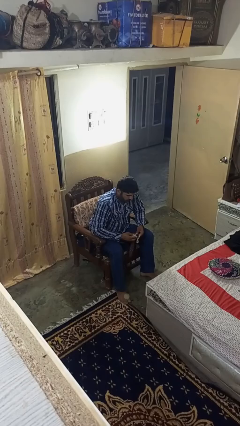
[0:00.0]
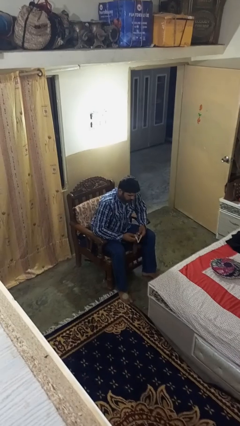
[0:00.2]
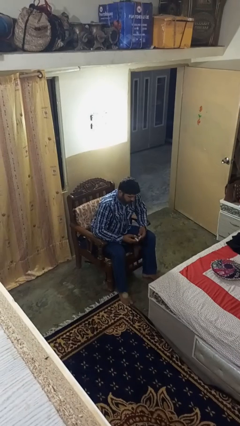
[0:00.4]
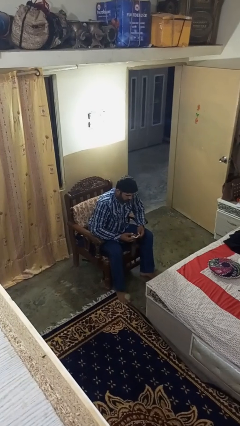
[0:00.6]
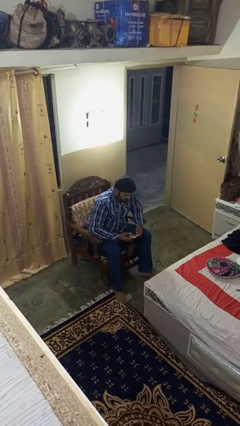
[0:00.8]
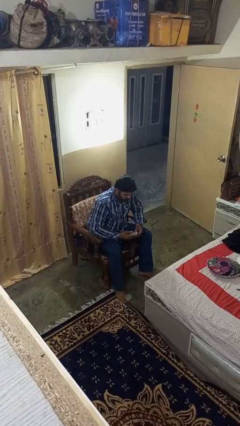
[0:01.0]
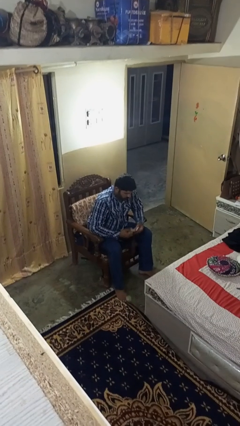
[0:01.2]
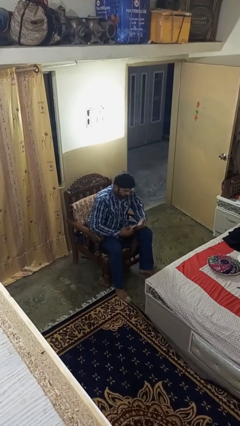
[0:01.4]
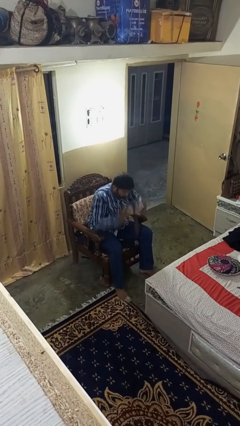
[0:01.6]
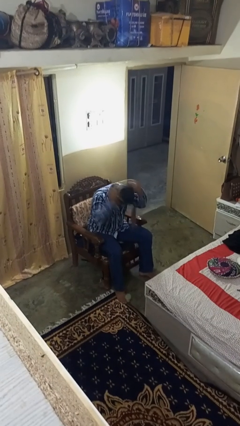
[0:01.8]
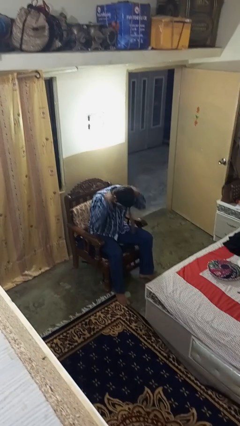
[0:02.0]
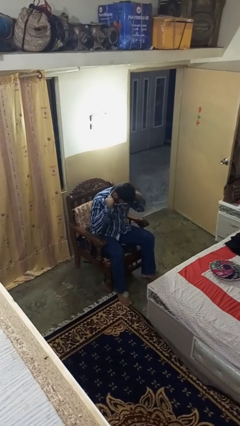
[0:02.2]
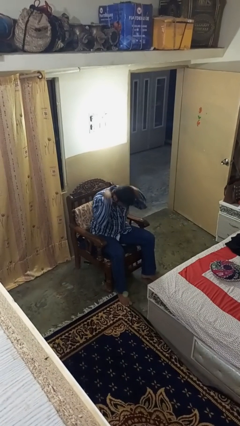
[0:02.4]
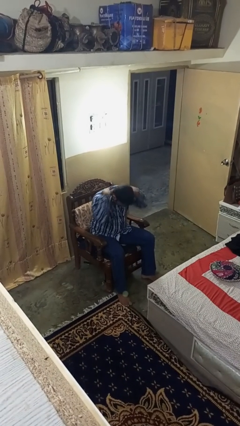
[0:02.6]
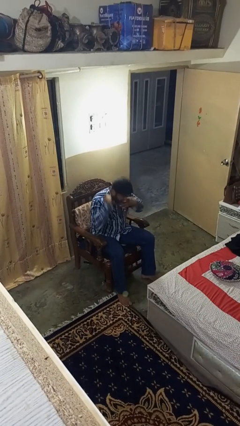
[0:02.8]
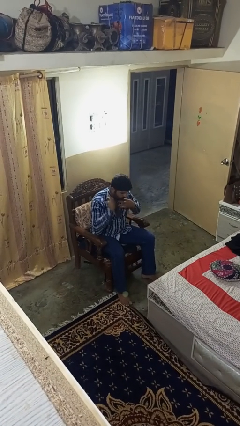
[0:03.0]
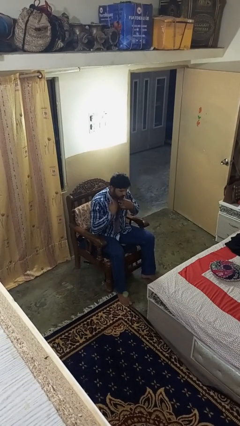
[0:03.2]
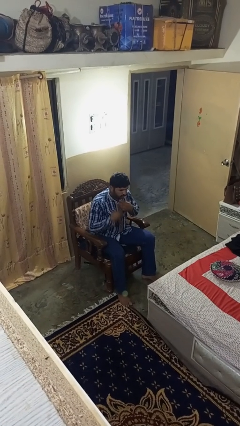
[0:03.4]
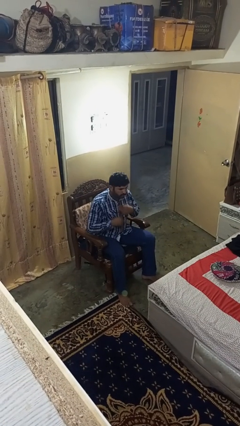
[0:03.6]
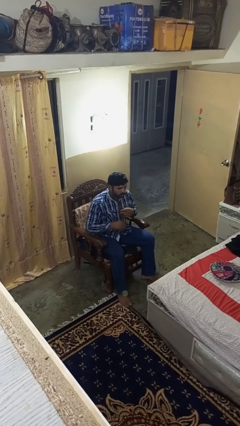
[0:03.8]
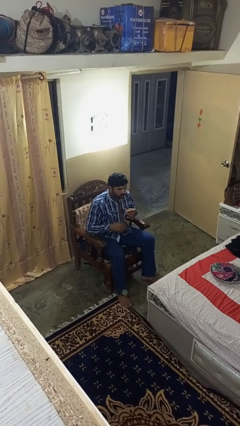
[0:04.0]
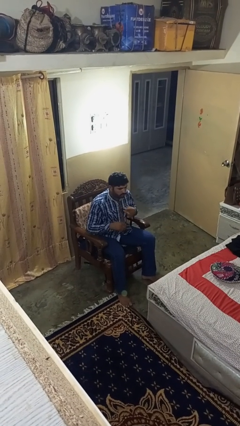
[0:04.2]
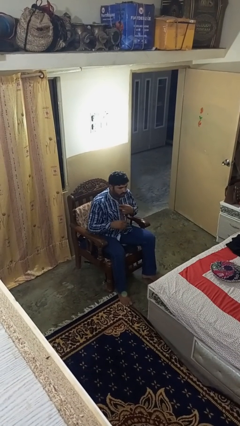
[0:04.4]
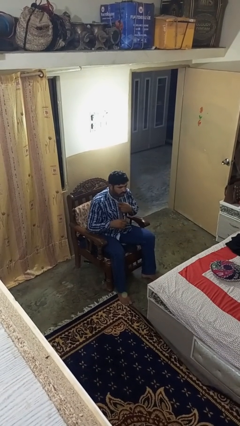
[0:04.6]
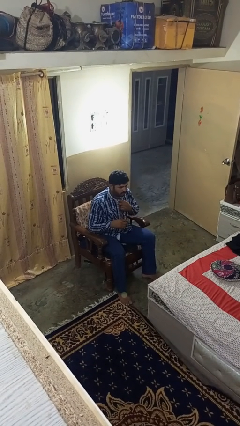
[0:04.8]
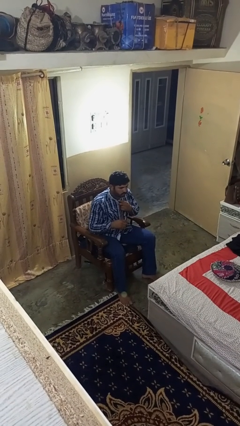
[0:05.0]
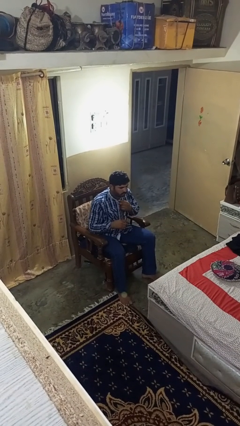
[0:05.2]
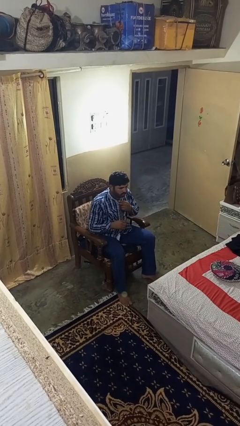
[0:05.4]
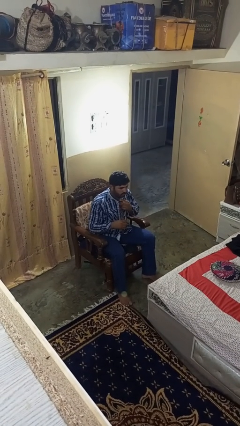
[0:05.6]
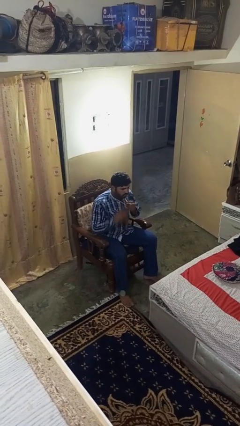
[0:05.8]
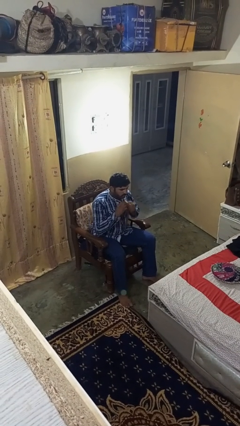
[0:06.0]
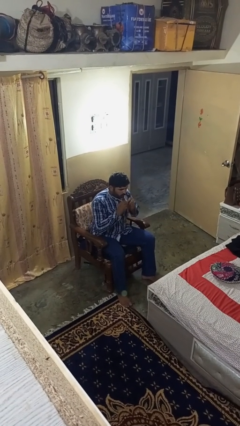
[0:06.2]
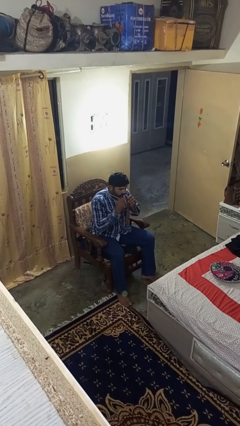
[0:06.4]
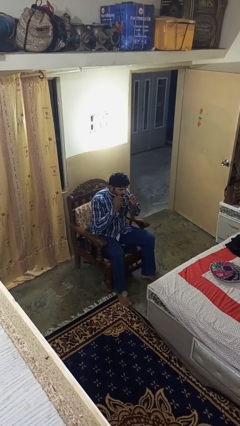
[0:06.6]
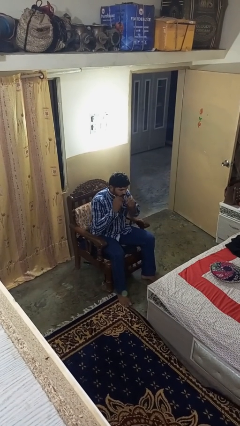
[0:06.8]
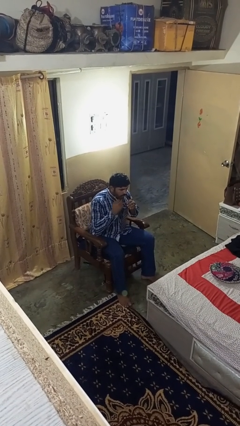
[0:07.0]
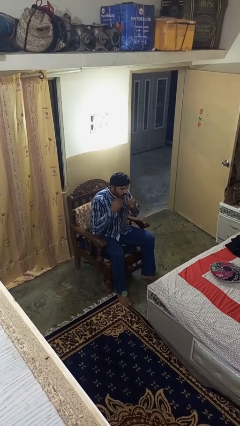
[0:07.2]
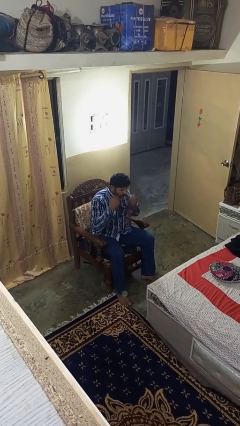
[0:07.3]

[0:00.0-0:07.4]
person puts on necktie

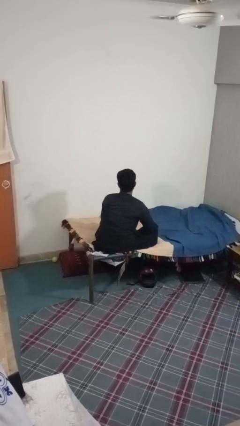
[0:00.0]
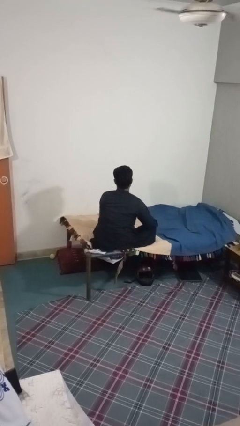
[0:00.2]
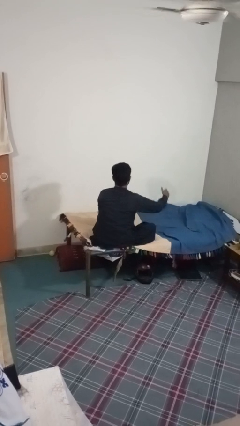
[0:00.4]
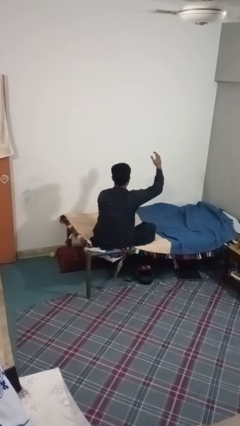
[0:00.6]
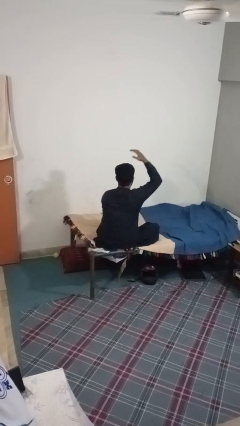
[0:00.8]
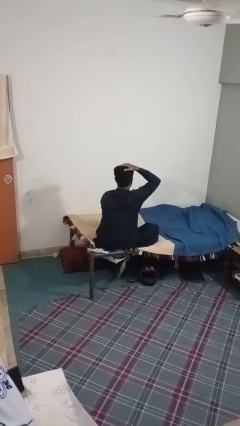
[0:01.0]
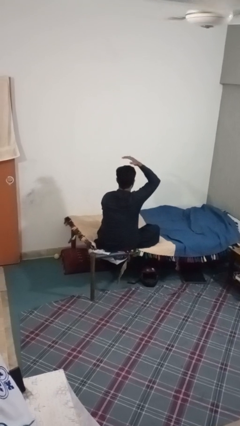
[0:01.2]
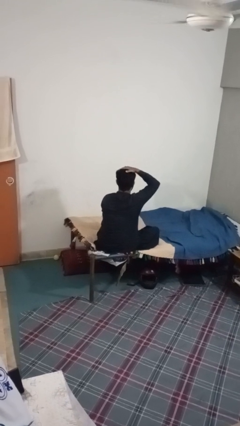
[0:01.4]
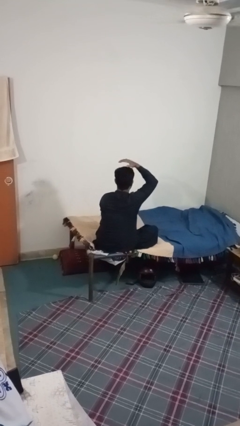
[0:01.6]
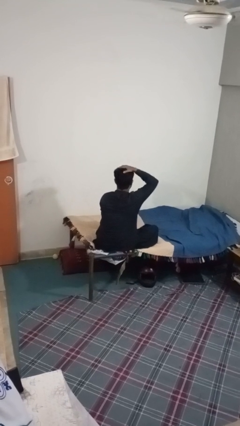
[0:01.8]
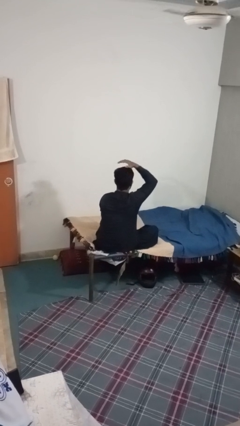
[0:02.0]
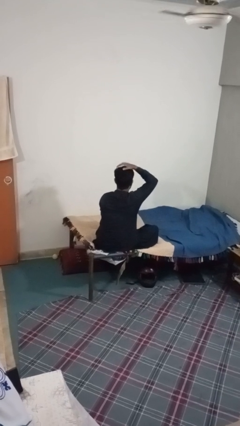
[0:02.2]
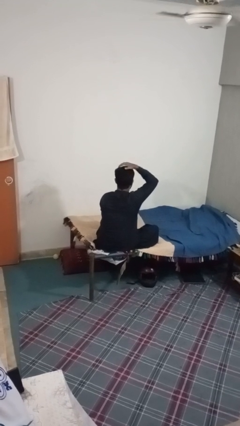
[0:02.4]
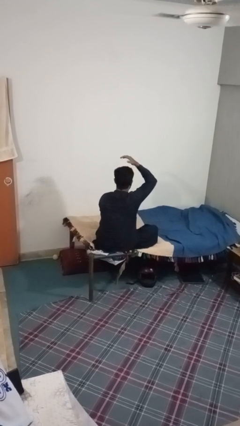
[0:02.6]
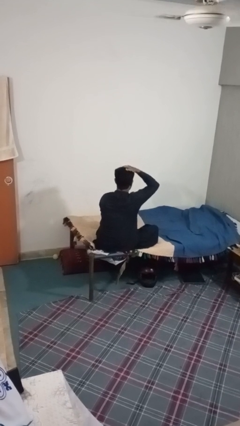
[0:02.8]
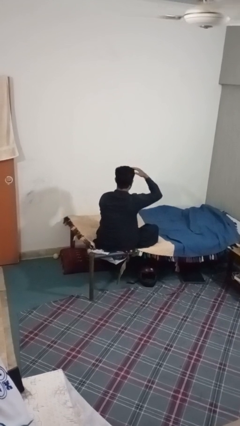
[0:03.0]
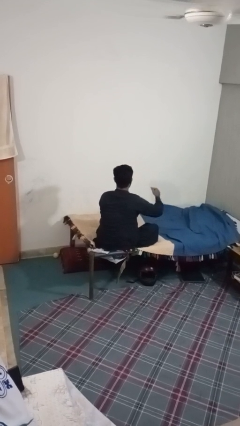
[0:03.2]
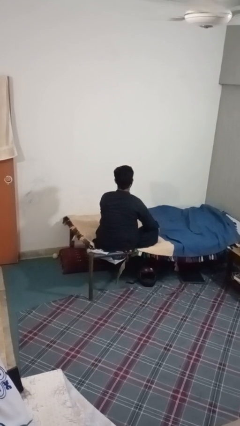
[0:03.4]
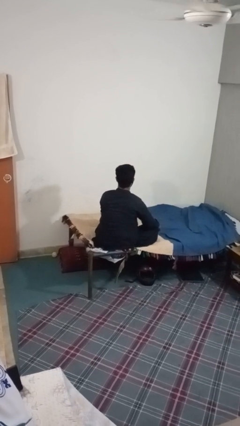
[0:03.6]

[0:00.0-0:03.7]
person pats head

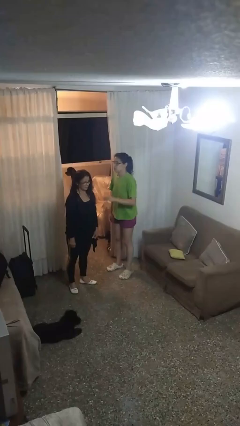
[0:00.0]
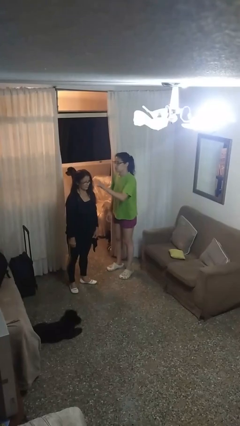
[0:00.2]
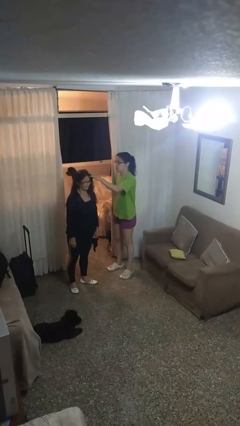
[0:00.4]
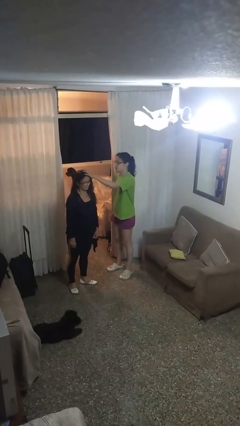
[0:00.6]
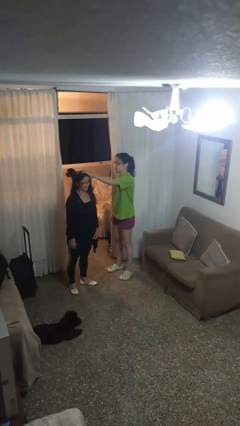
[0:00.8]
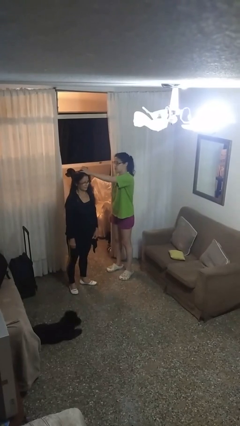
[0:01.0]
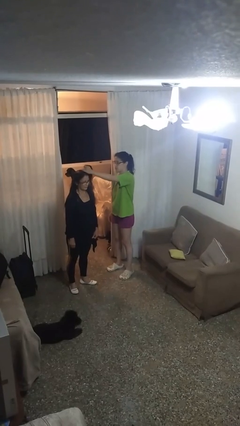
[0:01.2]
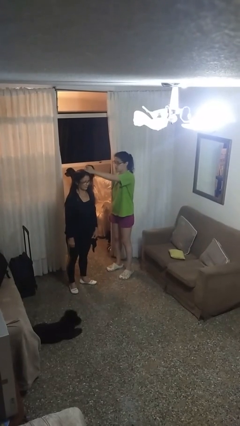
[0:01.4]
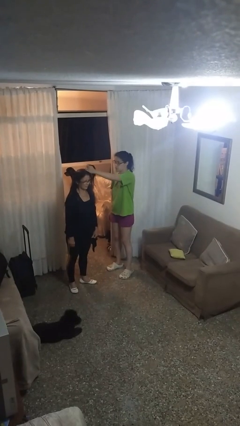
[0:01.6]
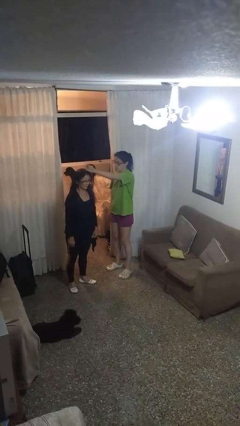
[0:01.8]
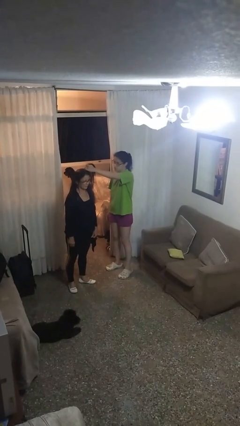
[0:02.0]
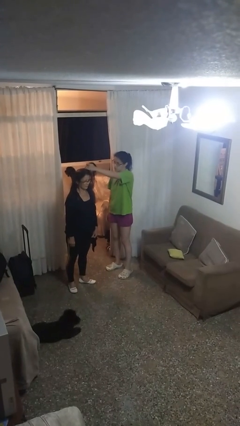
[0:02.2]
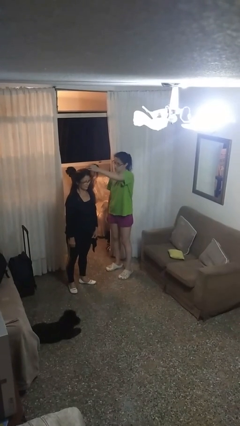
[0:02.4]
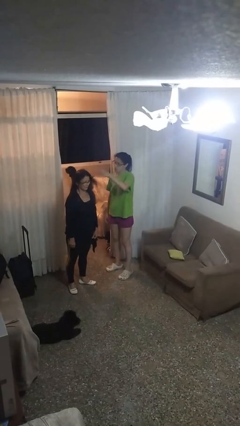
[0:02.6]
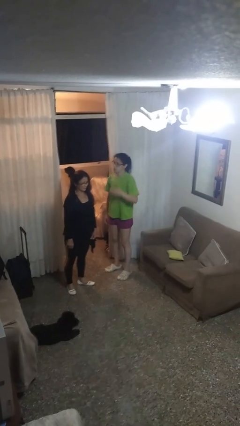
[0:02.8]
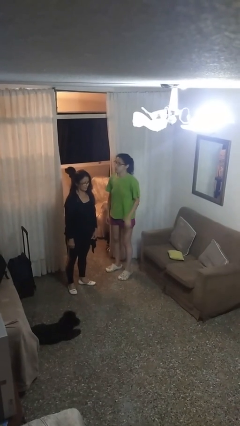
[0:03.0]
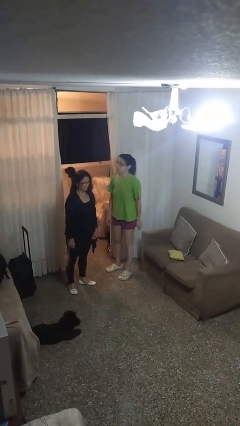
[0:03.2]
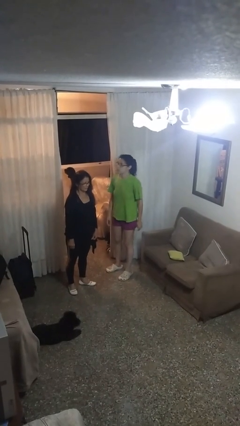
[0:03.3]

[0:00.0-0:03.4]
person grabs person by hair

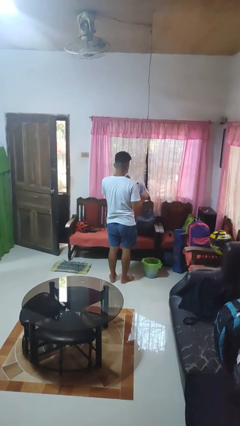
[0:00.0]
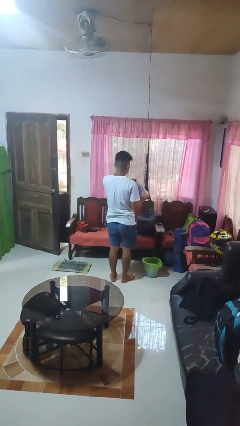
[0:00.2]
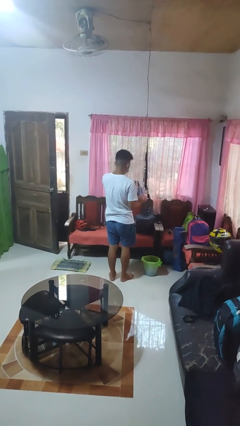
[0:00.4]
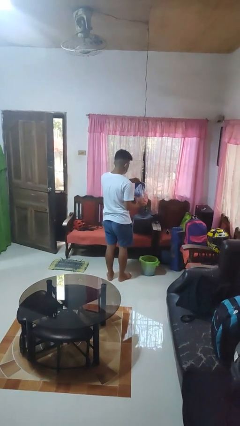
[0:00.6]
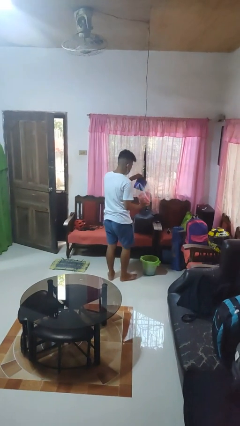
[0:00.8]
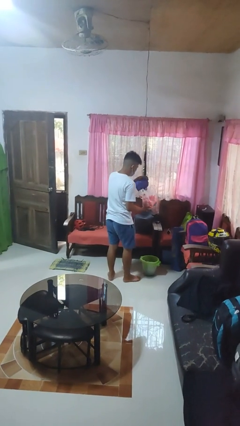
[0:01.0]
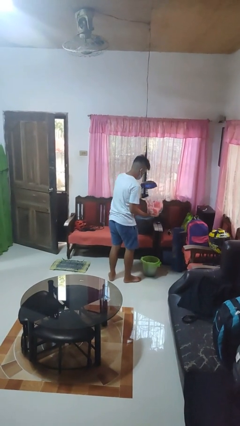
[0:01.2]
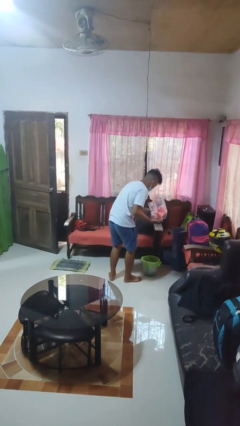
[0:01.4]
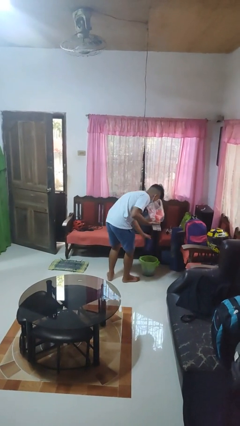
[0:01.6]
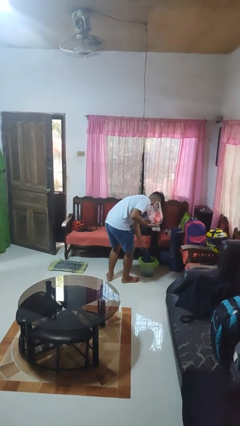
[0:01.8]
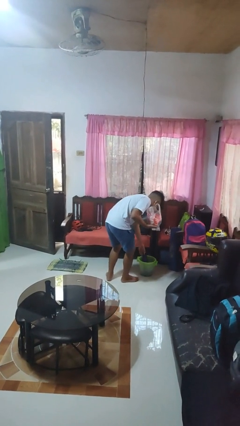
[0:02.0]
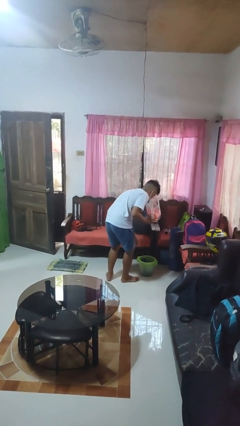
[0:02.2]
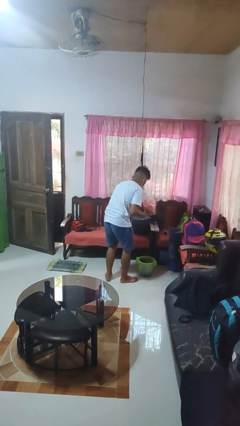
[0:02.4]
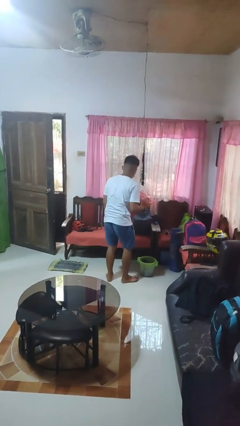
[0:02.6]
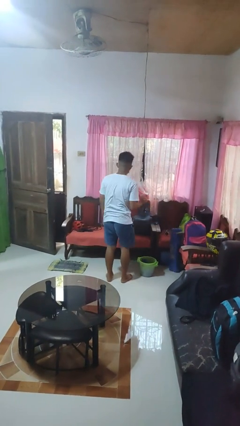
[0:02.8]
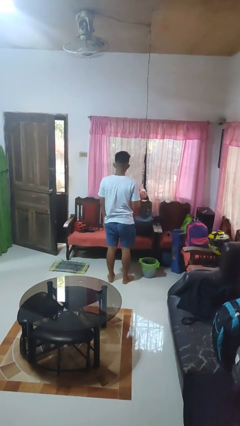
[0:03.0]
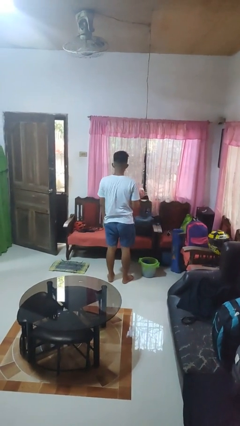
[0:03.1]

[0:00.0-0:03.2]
person discards trash
